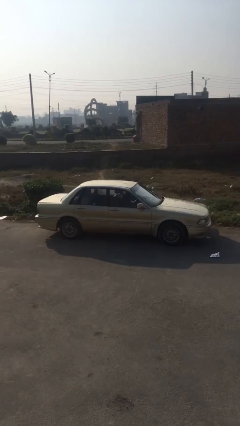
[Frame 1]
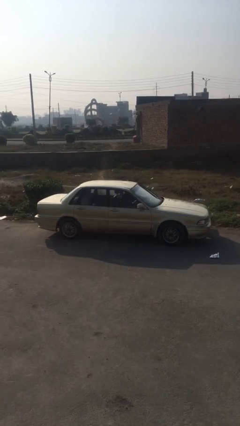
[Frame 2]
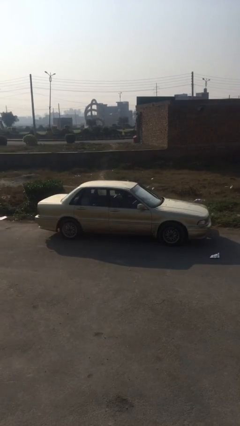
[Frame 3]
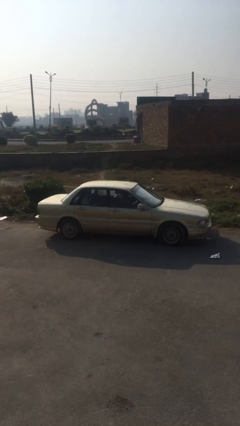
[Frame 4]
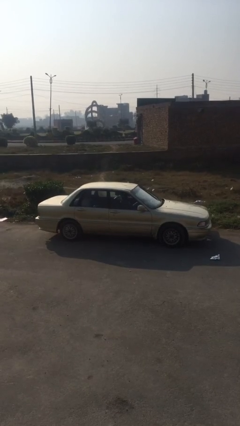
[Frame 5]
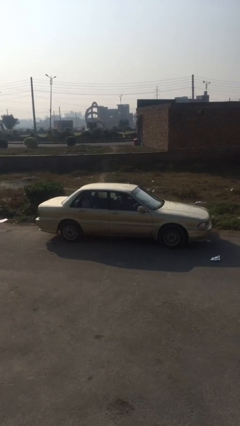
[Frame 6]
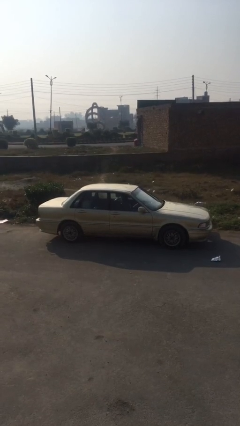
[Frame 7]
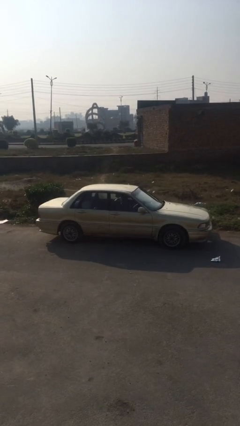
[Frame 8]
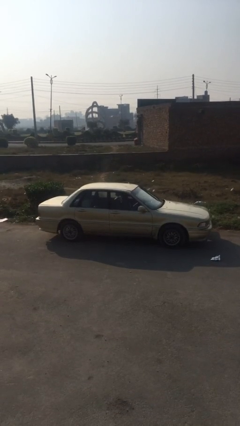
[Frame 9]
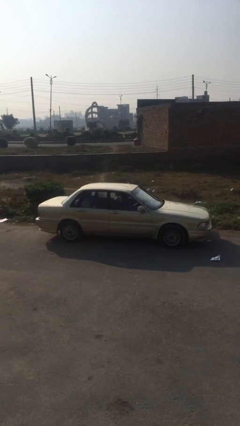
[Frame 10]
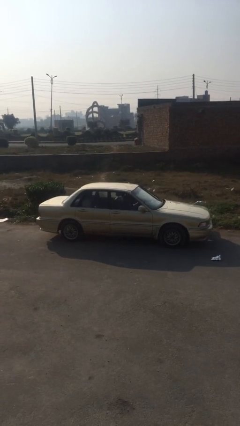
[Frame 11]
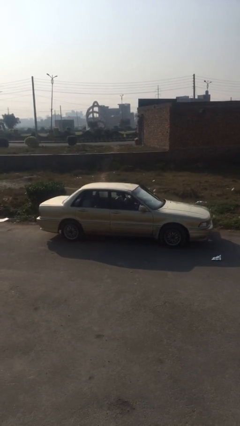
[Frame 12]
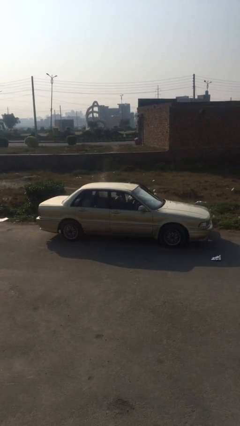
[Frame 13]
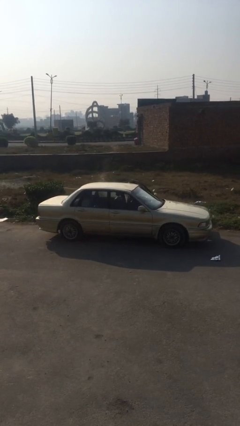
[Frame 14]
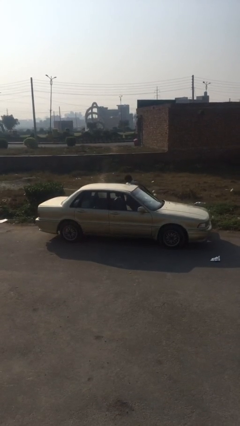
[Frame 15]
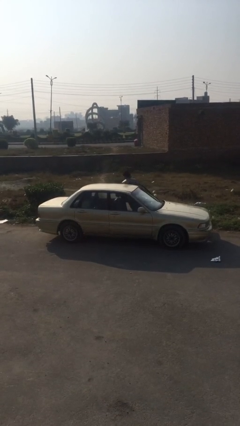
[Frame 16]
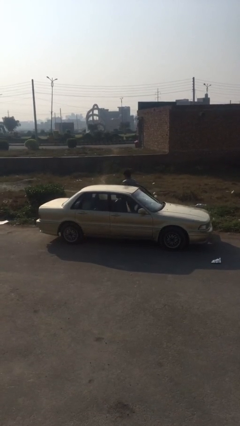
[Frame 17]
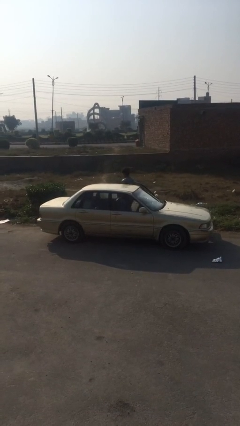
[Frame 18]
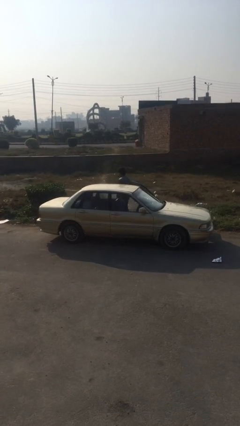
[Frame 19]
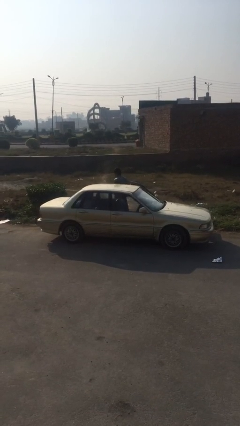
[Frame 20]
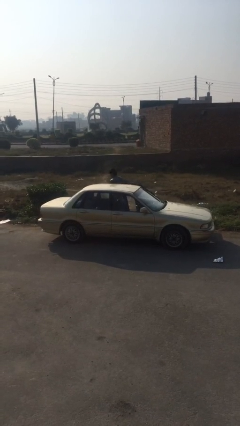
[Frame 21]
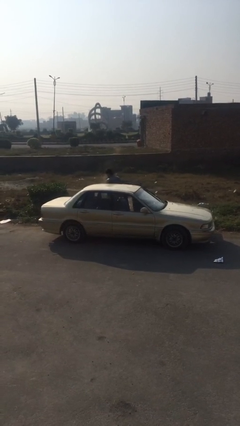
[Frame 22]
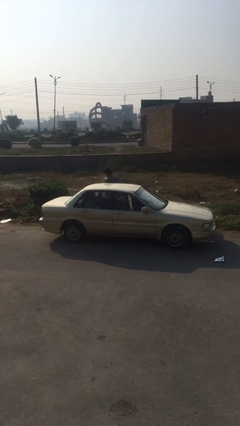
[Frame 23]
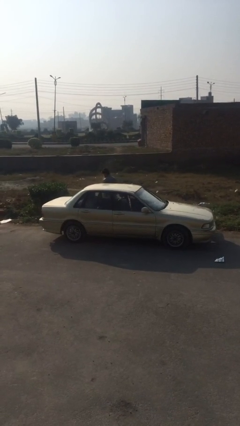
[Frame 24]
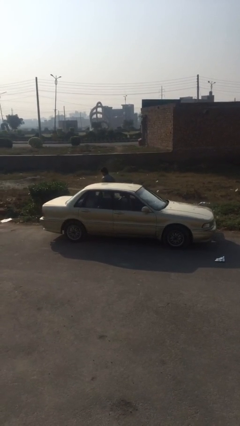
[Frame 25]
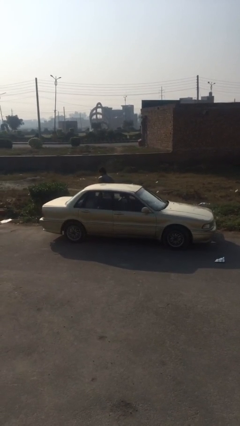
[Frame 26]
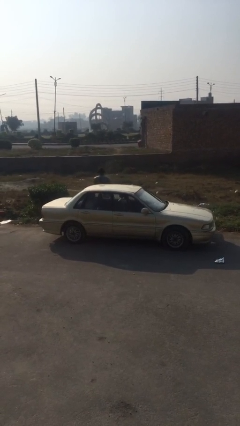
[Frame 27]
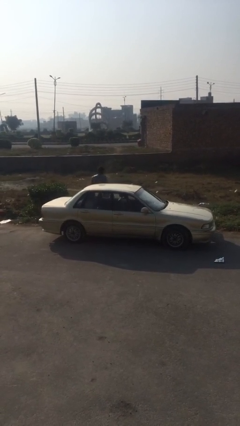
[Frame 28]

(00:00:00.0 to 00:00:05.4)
car drops off person

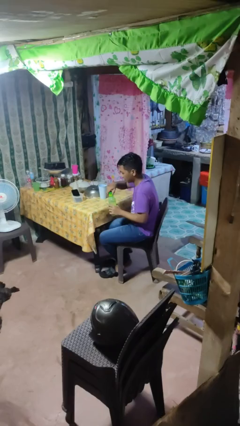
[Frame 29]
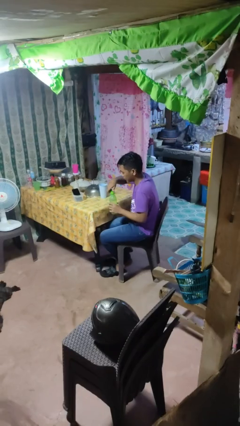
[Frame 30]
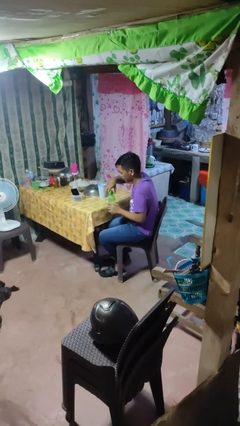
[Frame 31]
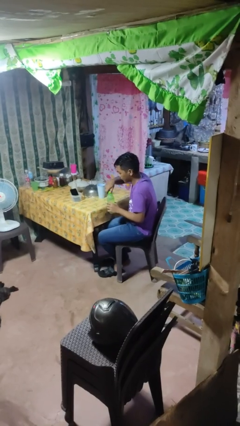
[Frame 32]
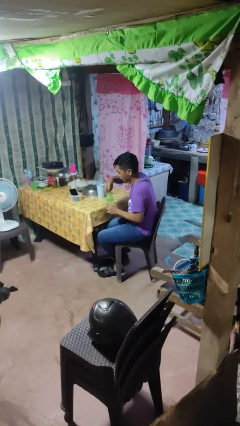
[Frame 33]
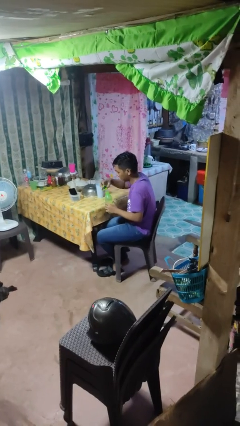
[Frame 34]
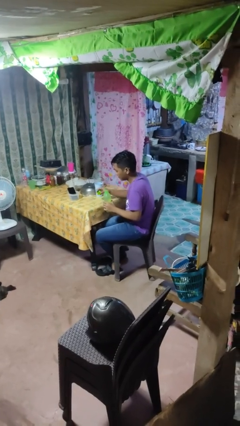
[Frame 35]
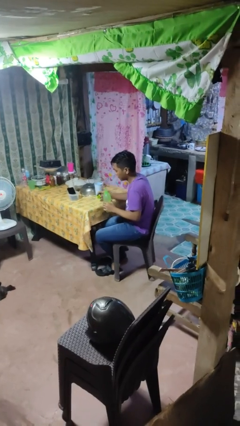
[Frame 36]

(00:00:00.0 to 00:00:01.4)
person unscrews lid from bottle

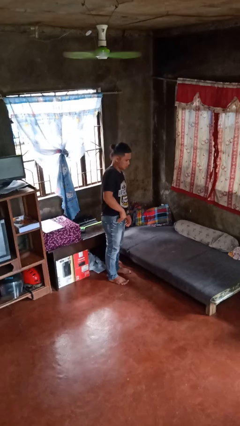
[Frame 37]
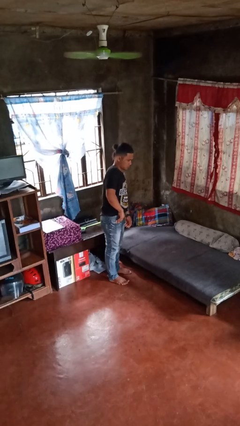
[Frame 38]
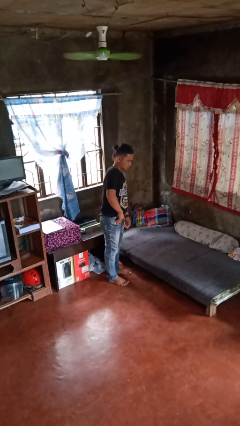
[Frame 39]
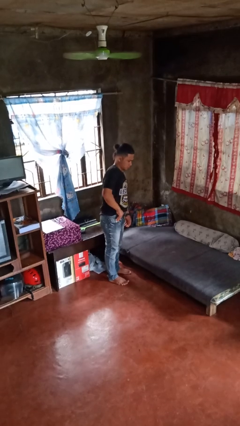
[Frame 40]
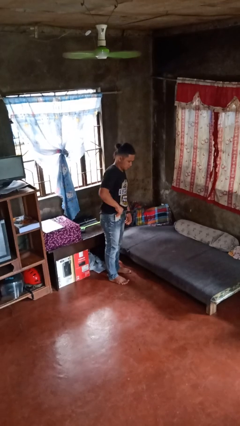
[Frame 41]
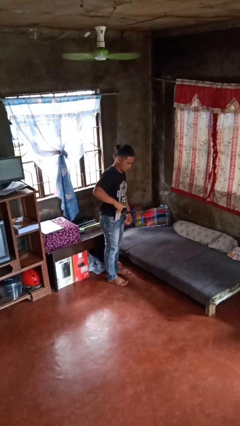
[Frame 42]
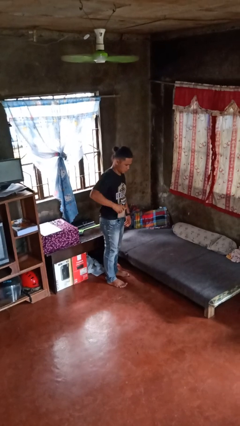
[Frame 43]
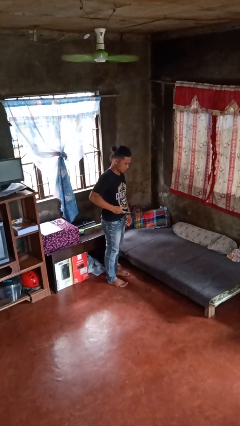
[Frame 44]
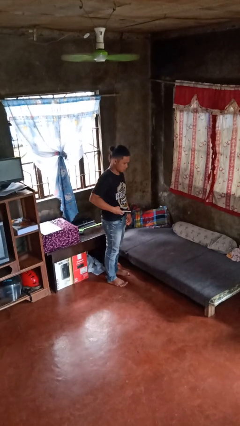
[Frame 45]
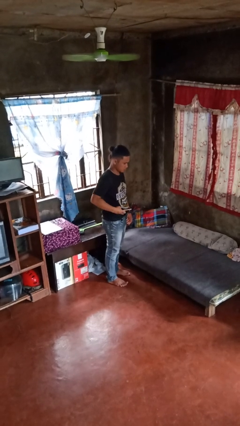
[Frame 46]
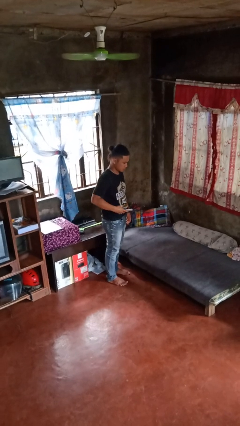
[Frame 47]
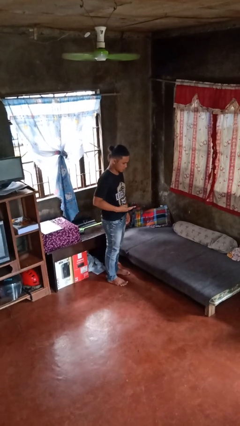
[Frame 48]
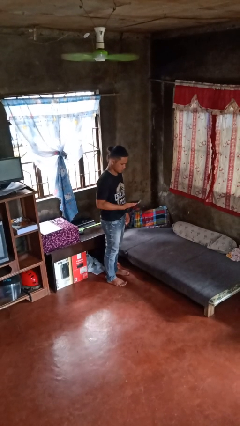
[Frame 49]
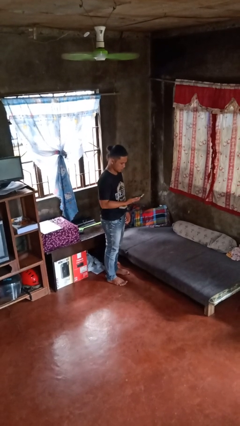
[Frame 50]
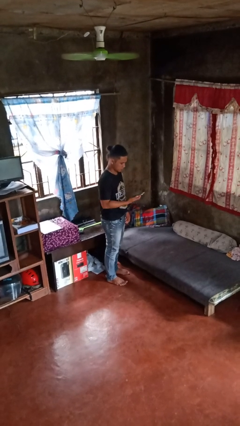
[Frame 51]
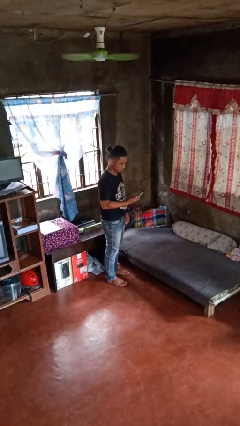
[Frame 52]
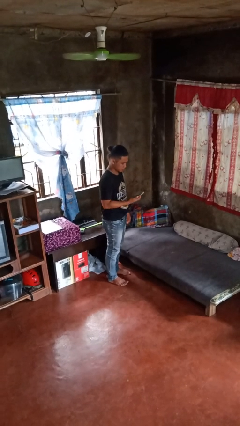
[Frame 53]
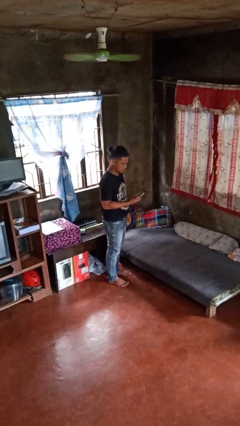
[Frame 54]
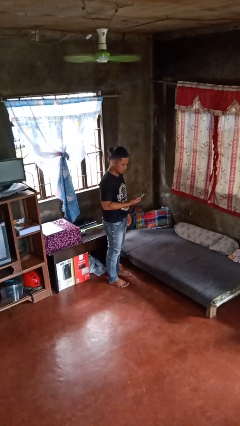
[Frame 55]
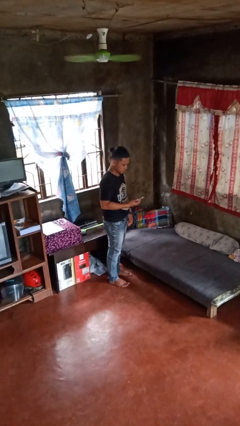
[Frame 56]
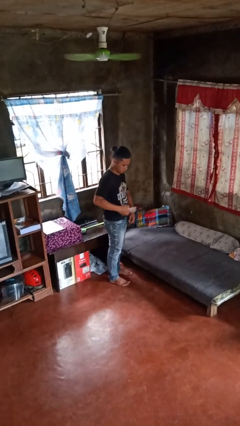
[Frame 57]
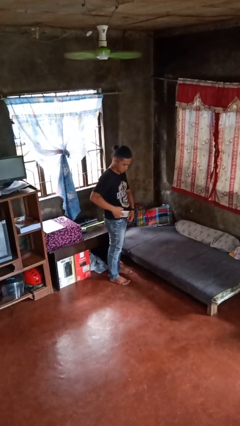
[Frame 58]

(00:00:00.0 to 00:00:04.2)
person takes phone from pocket

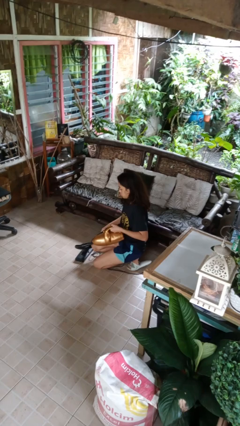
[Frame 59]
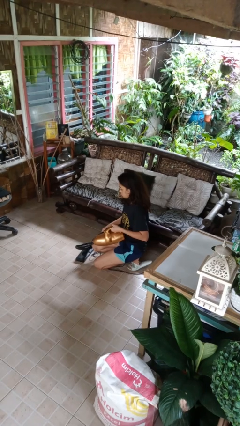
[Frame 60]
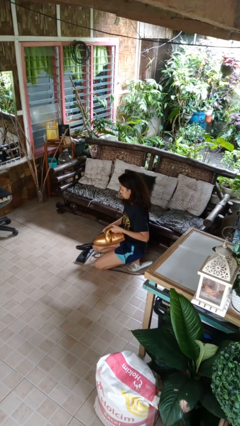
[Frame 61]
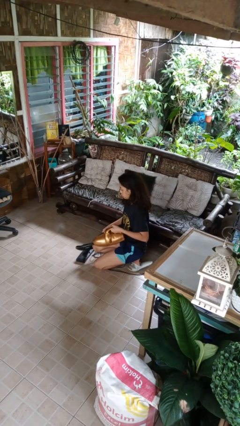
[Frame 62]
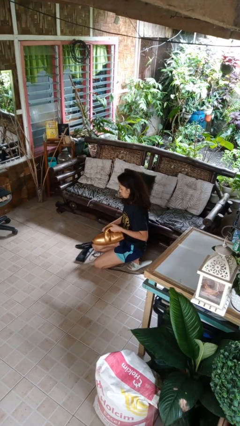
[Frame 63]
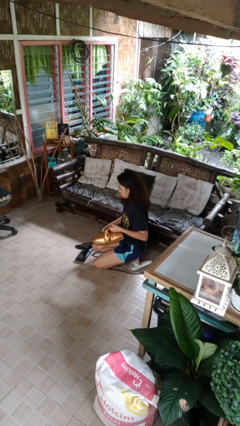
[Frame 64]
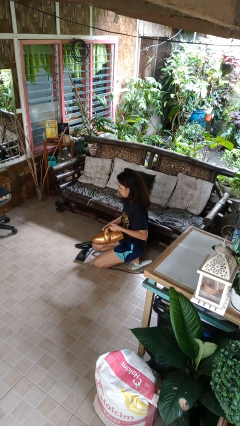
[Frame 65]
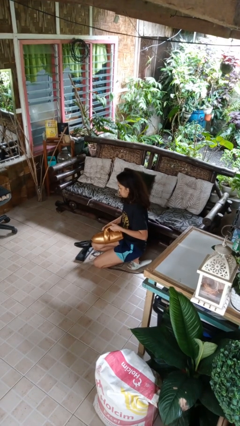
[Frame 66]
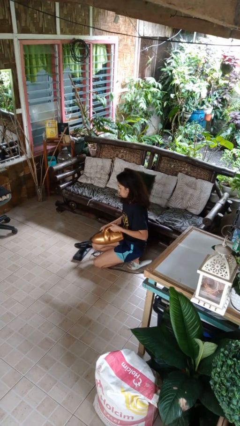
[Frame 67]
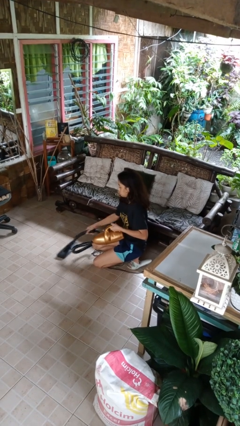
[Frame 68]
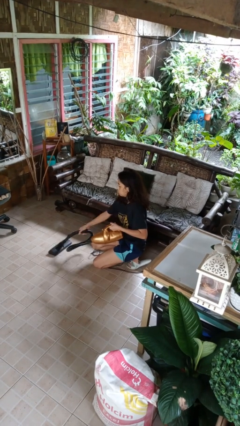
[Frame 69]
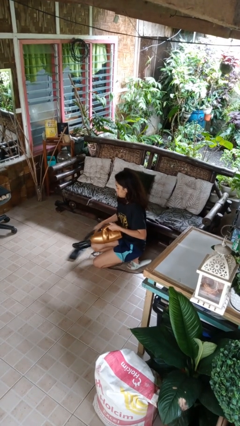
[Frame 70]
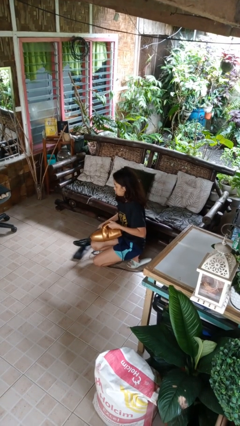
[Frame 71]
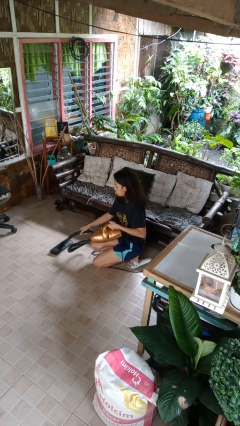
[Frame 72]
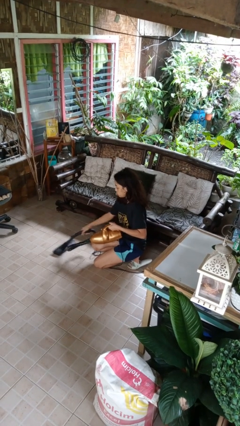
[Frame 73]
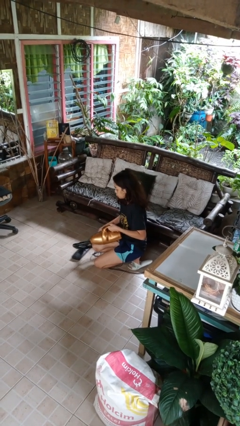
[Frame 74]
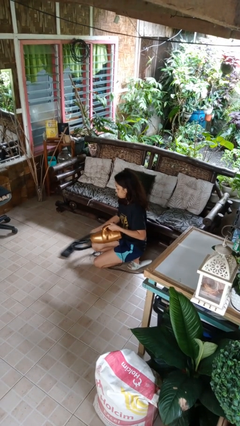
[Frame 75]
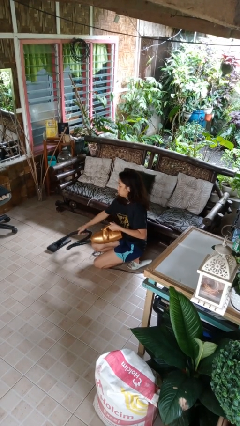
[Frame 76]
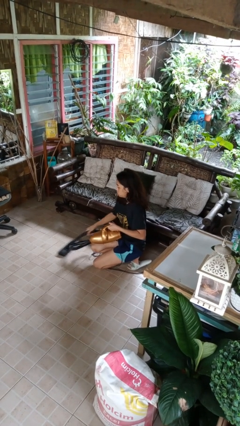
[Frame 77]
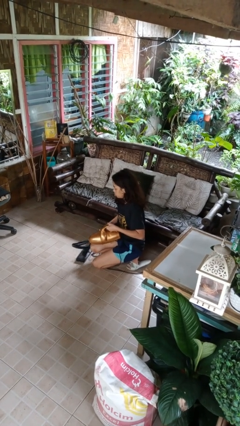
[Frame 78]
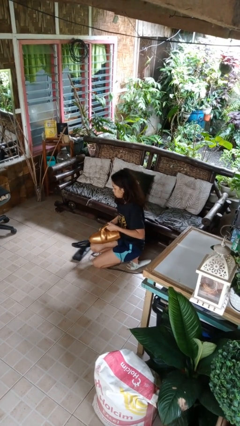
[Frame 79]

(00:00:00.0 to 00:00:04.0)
person vacuums carpet

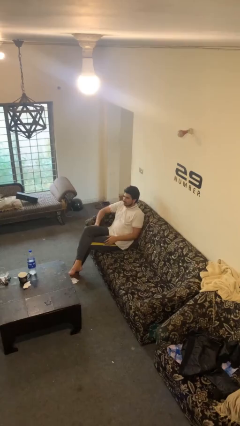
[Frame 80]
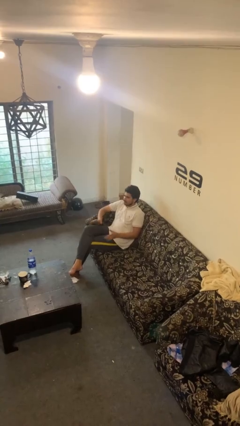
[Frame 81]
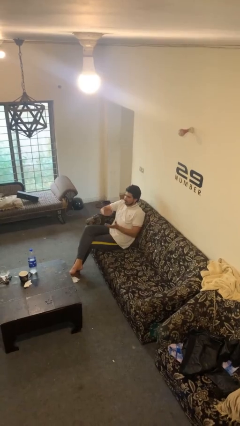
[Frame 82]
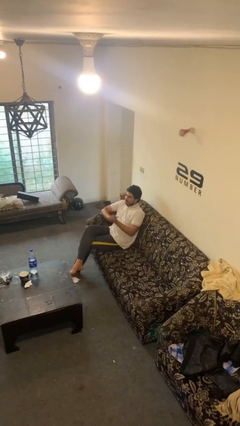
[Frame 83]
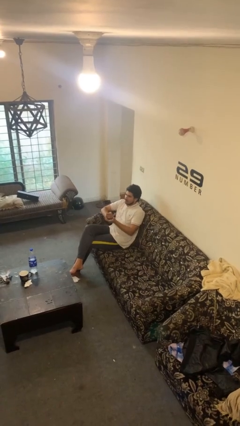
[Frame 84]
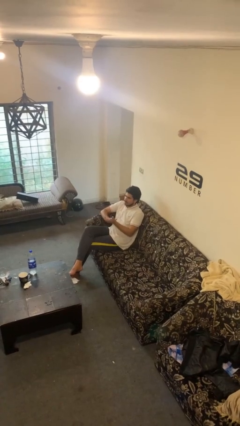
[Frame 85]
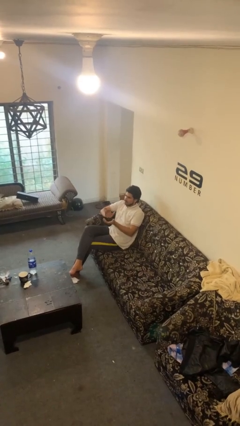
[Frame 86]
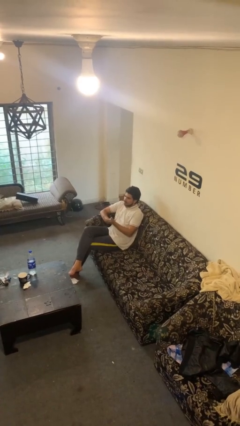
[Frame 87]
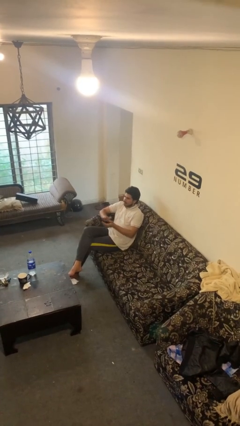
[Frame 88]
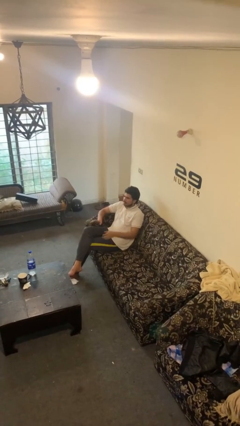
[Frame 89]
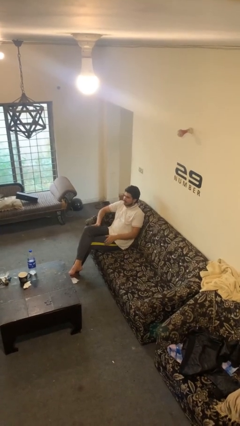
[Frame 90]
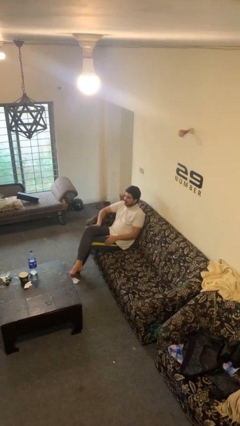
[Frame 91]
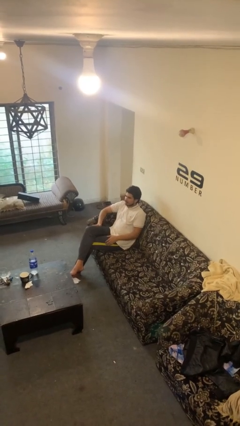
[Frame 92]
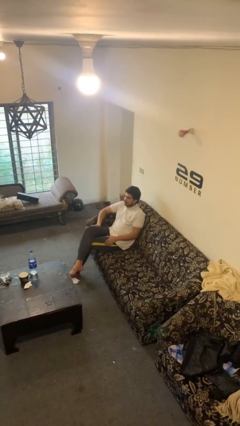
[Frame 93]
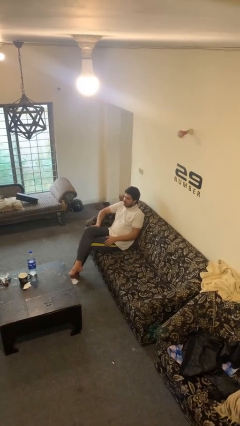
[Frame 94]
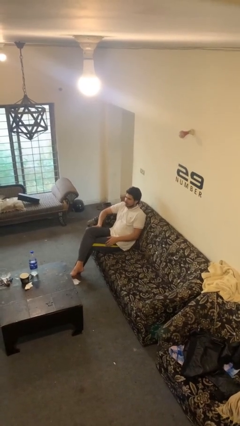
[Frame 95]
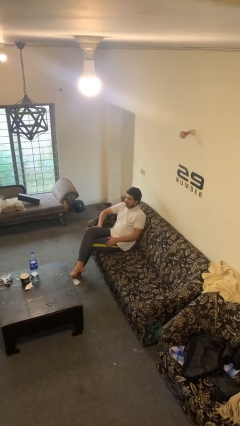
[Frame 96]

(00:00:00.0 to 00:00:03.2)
person claps hands
